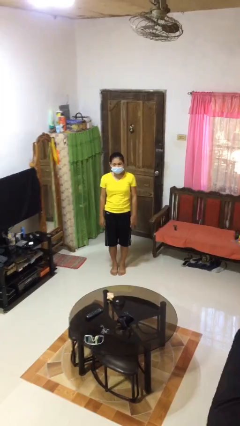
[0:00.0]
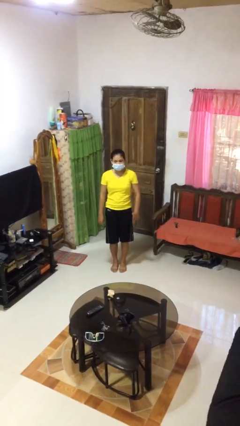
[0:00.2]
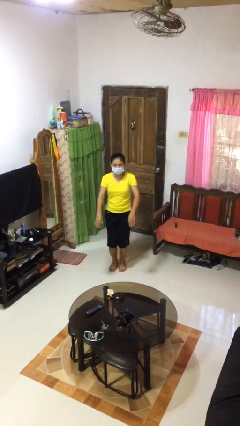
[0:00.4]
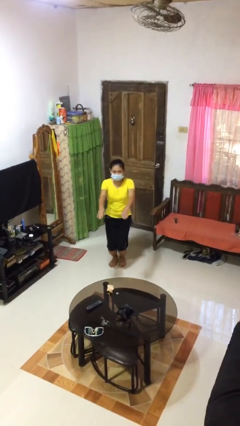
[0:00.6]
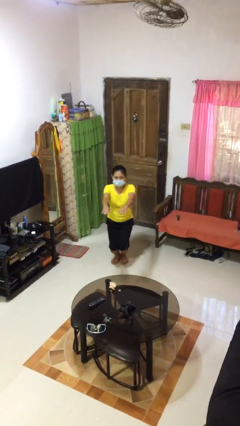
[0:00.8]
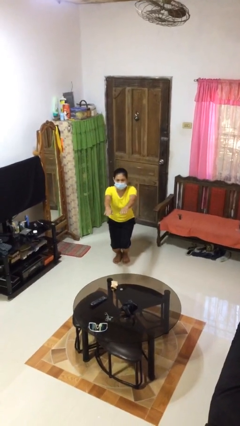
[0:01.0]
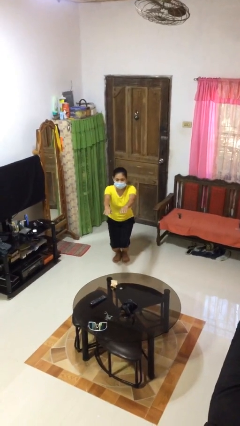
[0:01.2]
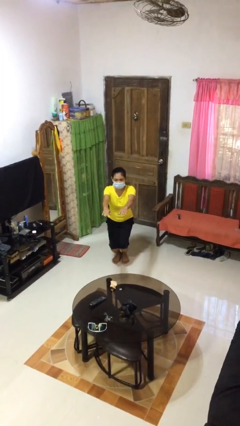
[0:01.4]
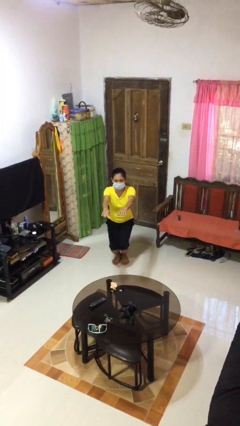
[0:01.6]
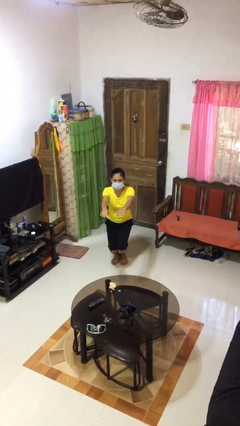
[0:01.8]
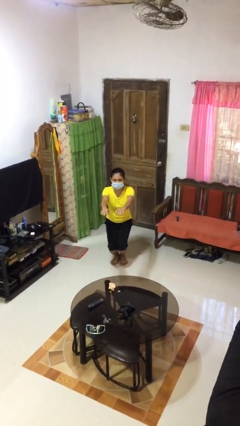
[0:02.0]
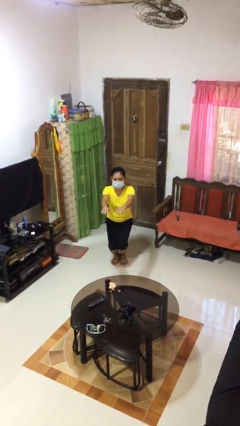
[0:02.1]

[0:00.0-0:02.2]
person squats

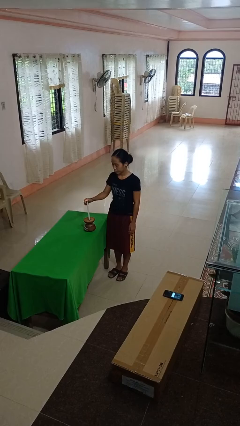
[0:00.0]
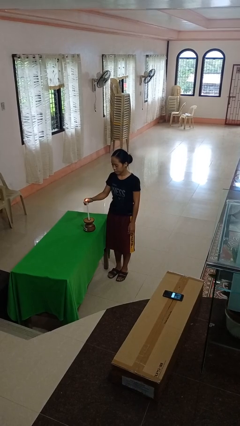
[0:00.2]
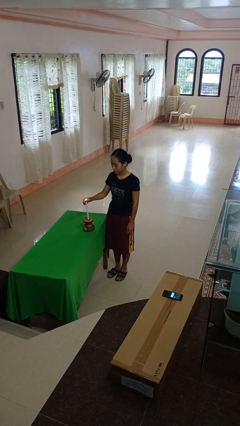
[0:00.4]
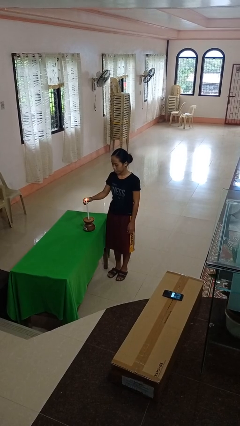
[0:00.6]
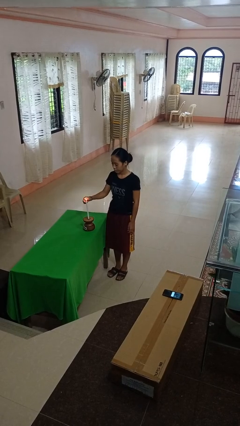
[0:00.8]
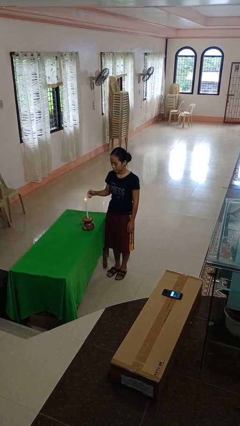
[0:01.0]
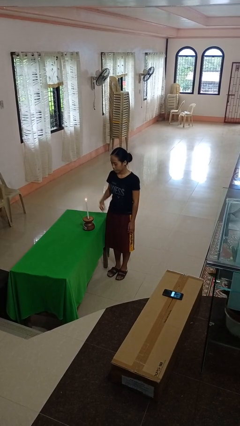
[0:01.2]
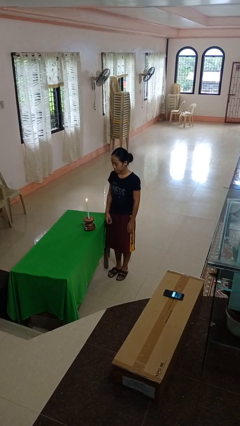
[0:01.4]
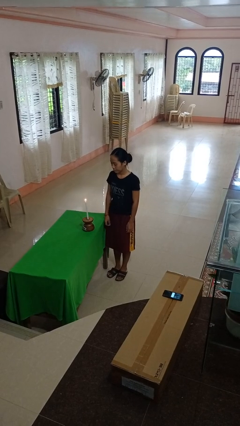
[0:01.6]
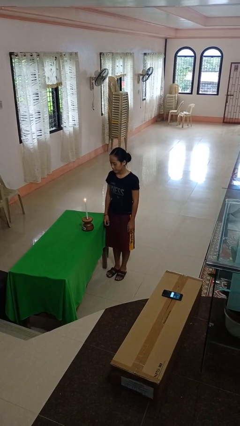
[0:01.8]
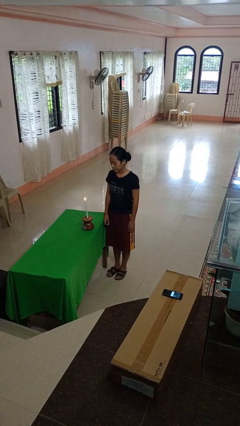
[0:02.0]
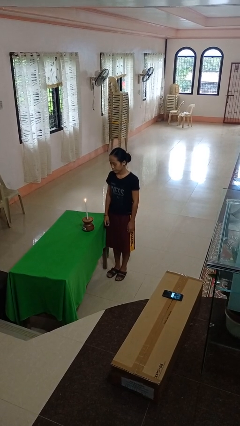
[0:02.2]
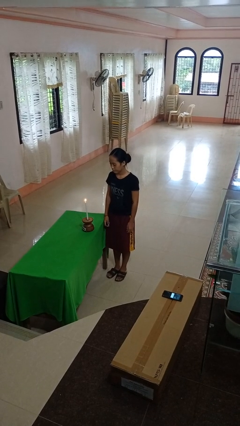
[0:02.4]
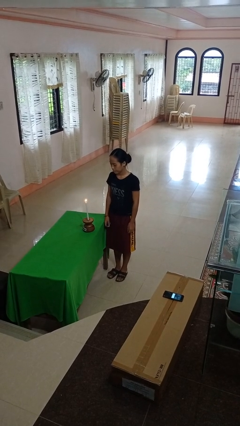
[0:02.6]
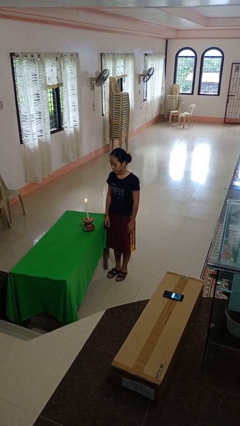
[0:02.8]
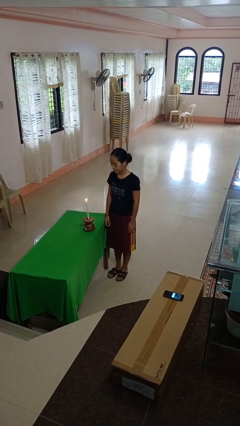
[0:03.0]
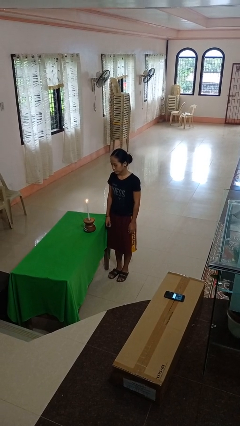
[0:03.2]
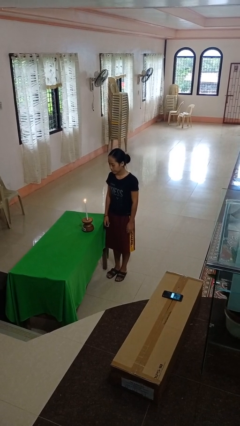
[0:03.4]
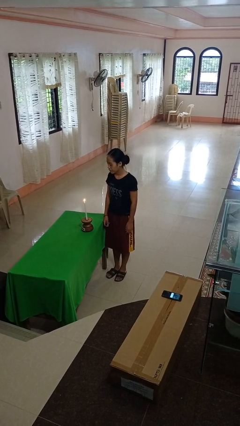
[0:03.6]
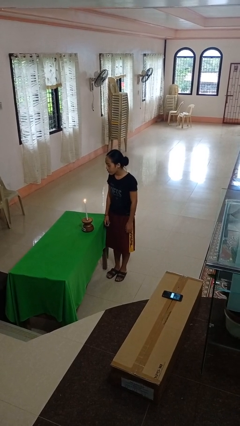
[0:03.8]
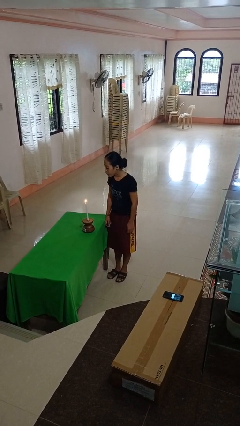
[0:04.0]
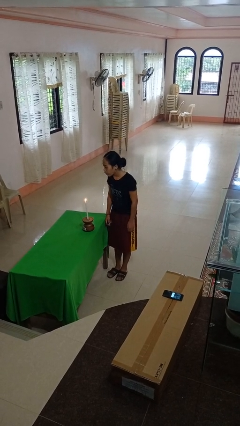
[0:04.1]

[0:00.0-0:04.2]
person lights candle

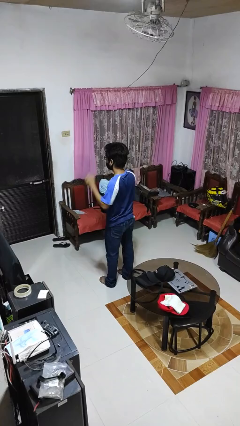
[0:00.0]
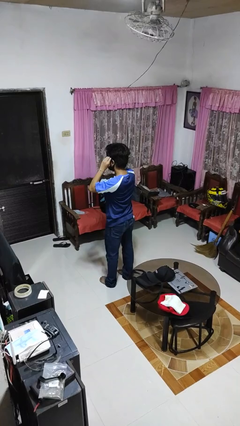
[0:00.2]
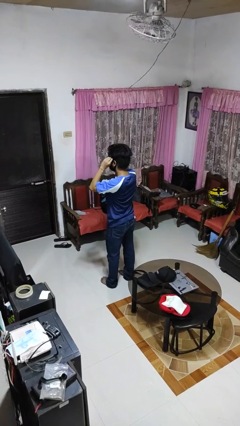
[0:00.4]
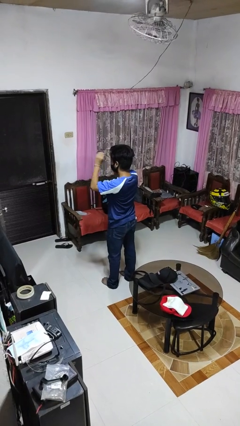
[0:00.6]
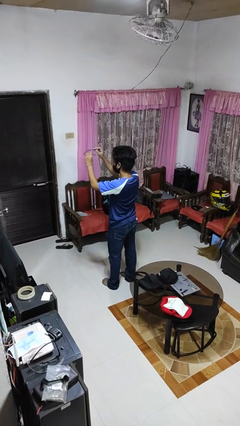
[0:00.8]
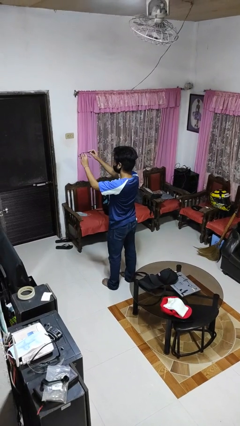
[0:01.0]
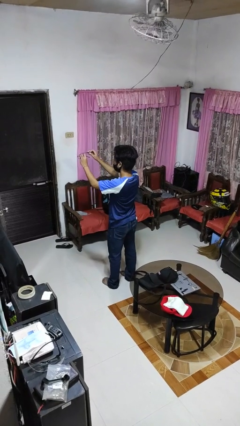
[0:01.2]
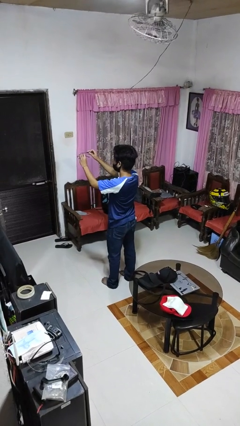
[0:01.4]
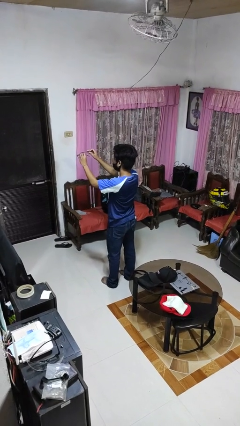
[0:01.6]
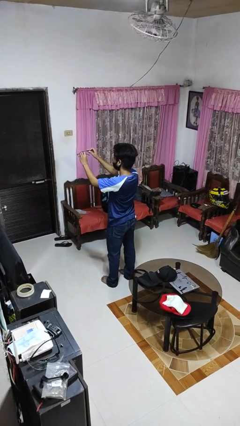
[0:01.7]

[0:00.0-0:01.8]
person takes off glasses

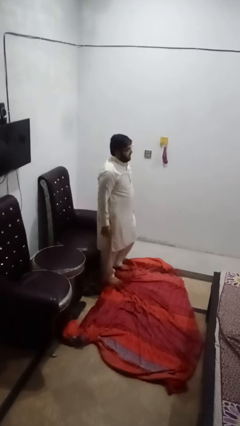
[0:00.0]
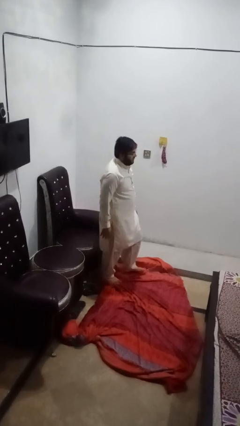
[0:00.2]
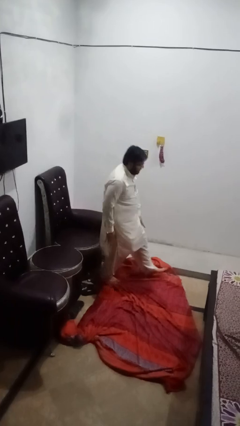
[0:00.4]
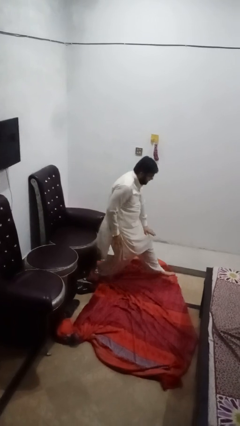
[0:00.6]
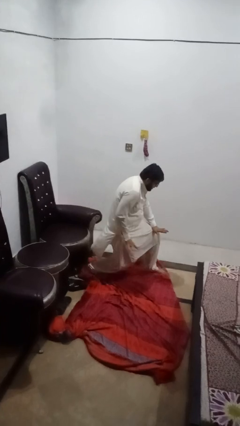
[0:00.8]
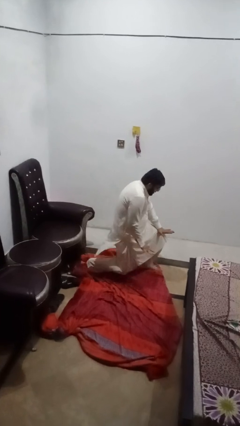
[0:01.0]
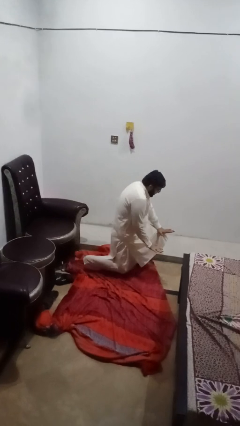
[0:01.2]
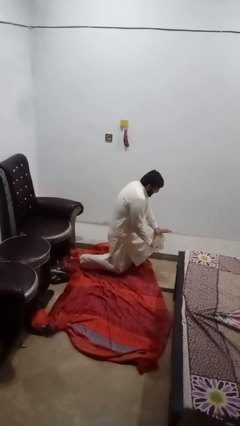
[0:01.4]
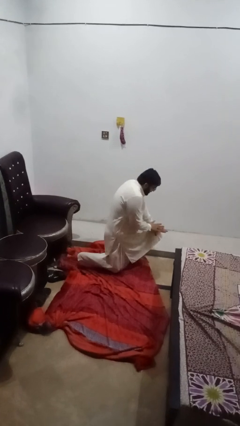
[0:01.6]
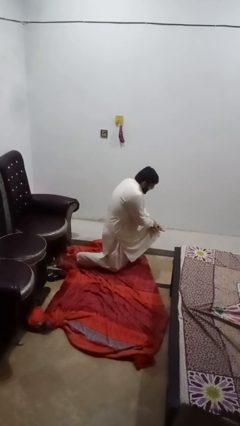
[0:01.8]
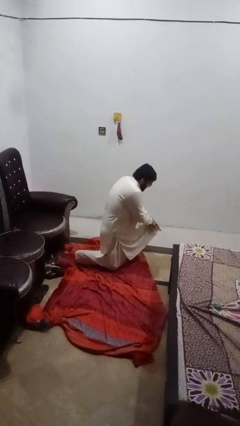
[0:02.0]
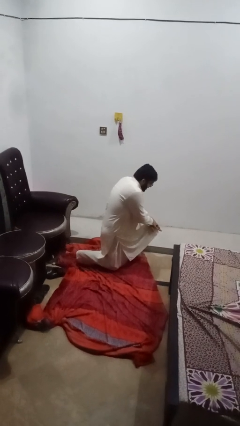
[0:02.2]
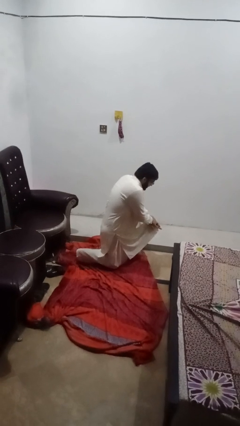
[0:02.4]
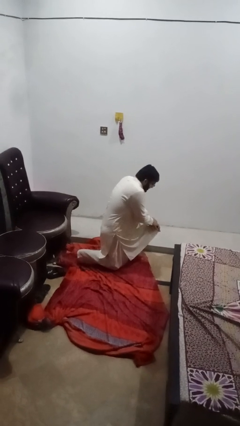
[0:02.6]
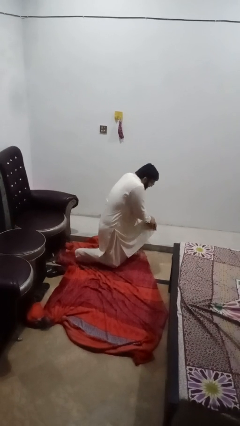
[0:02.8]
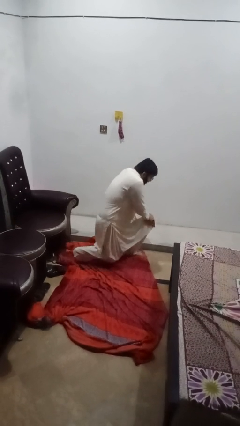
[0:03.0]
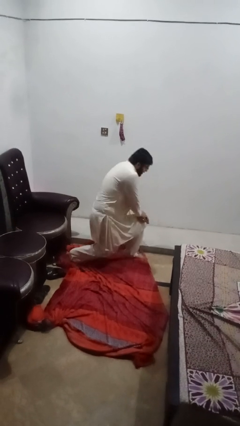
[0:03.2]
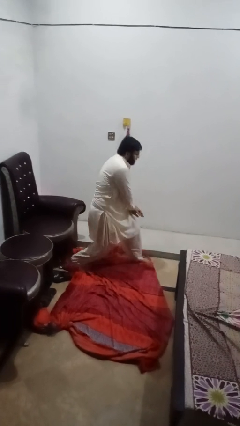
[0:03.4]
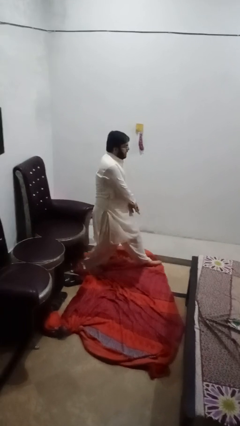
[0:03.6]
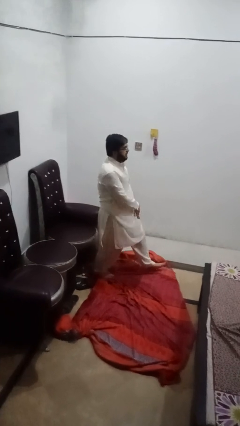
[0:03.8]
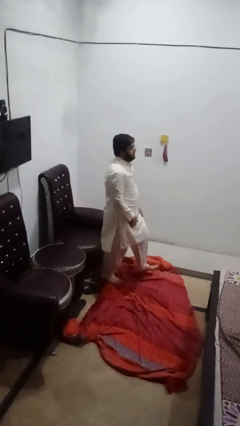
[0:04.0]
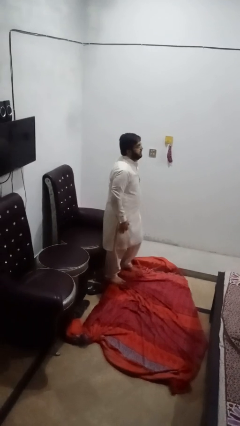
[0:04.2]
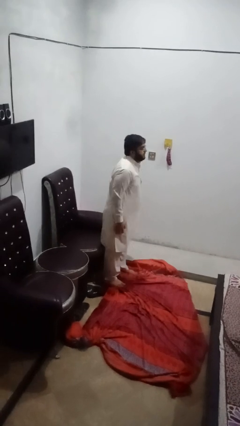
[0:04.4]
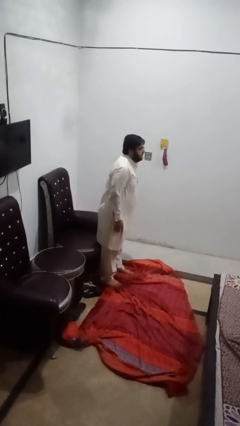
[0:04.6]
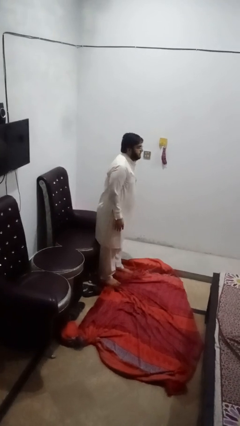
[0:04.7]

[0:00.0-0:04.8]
person exercises with lunges

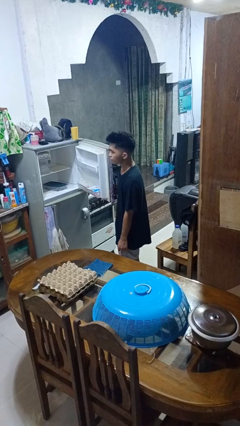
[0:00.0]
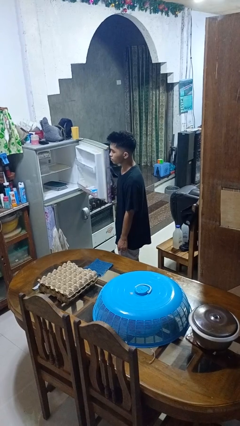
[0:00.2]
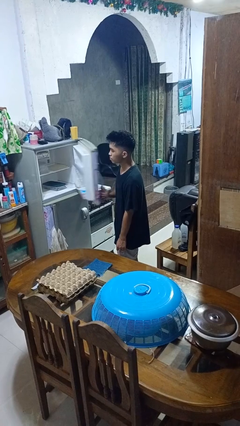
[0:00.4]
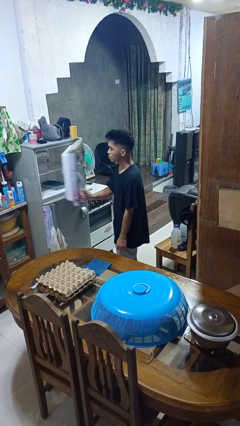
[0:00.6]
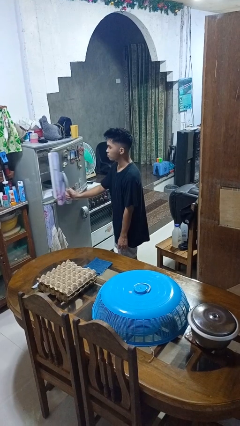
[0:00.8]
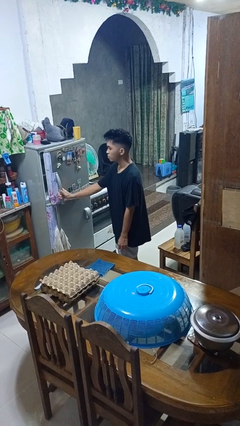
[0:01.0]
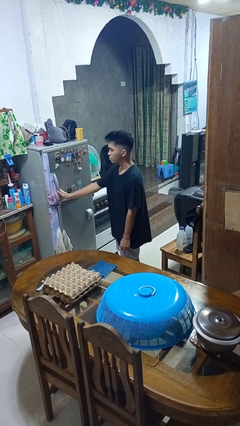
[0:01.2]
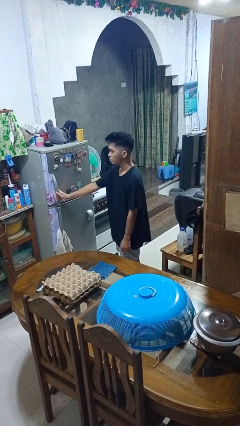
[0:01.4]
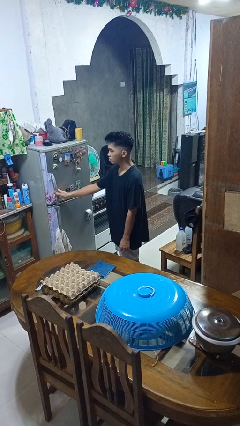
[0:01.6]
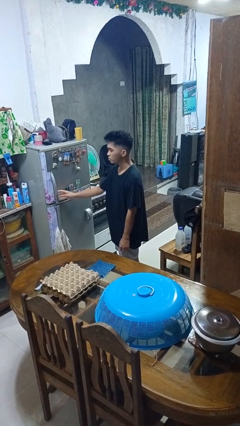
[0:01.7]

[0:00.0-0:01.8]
person closes refrigerator

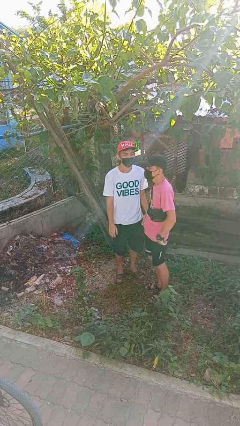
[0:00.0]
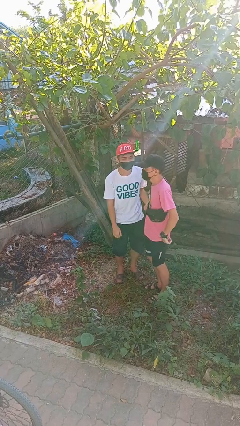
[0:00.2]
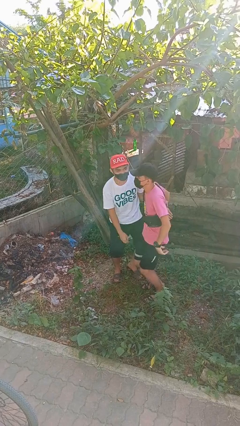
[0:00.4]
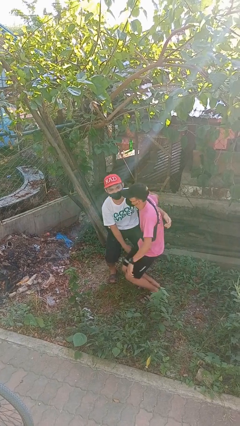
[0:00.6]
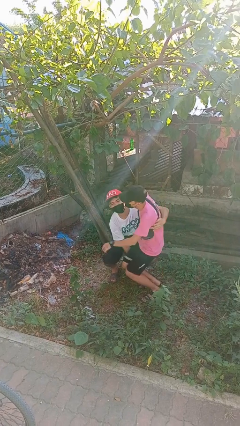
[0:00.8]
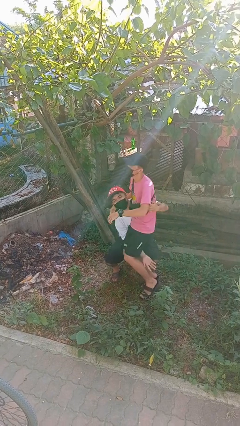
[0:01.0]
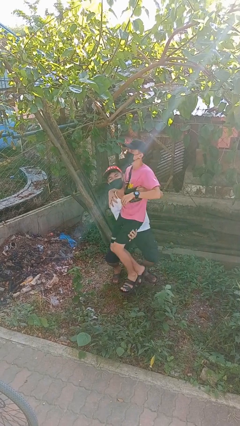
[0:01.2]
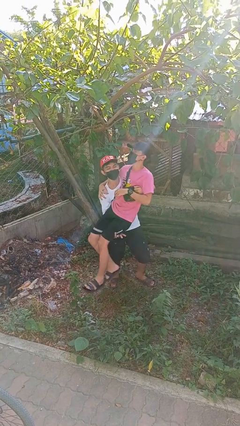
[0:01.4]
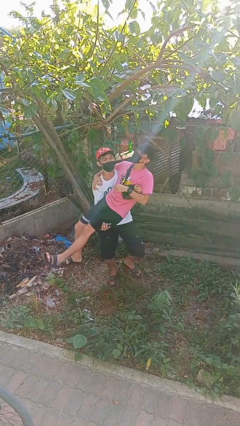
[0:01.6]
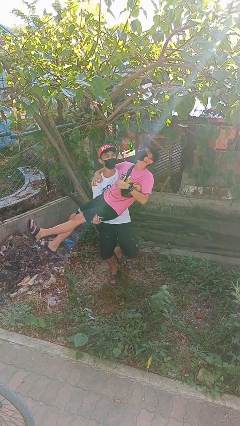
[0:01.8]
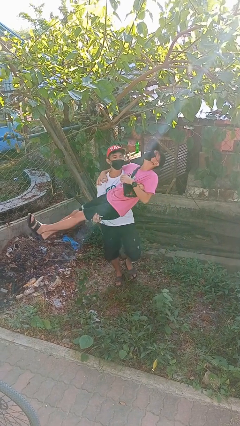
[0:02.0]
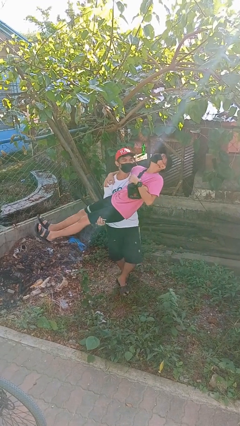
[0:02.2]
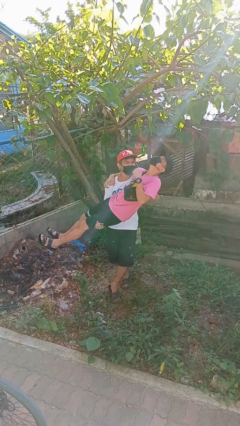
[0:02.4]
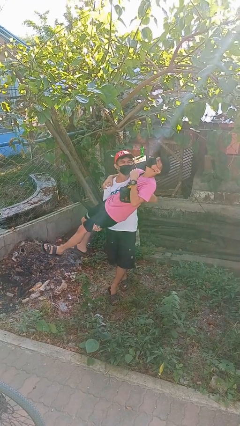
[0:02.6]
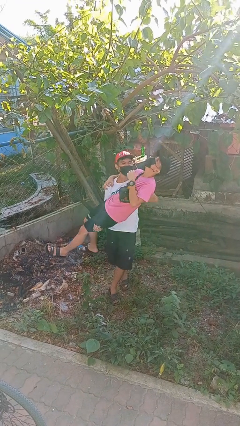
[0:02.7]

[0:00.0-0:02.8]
person picks up person
